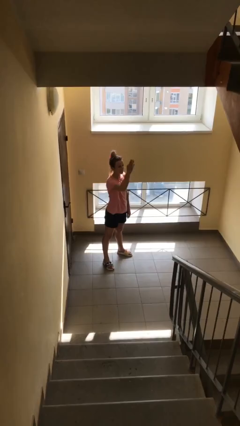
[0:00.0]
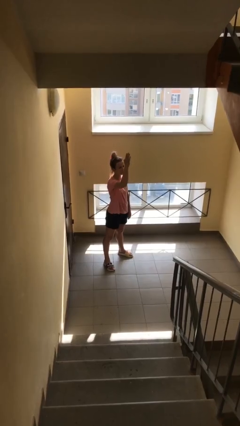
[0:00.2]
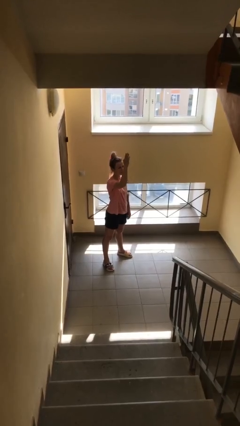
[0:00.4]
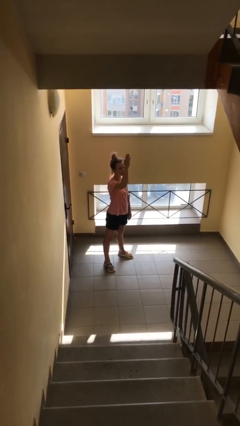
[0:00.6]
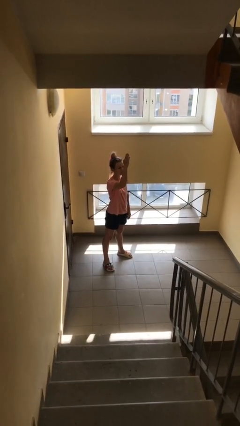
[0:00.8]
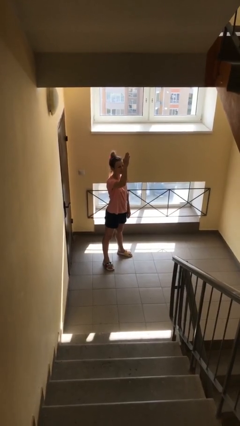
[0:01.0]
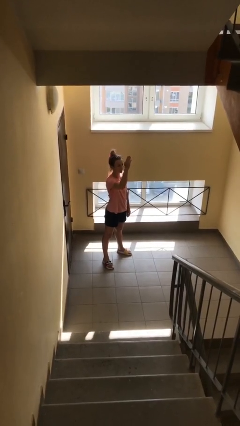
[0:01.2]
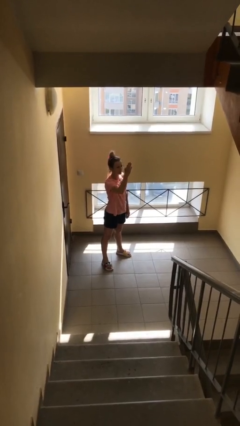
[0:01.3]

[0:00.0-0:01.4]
person gestures raise hand

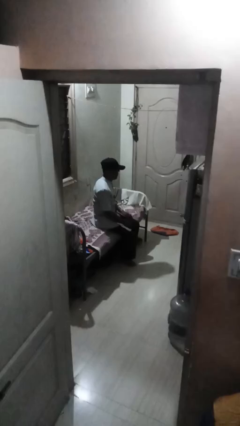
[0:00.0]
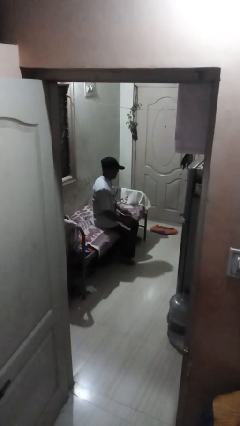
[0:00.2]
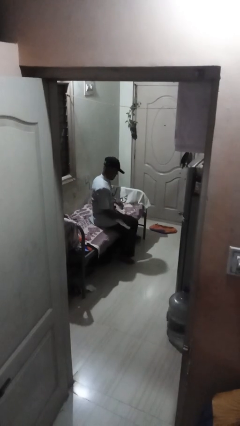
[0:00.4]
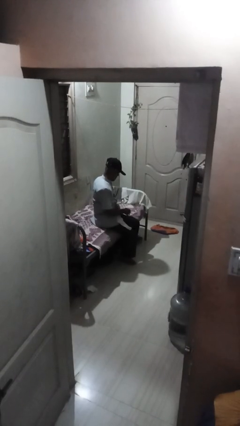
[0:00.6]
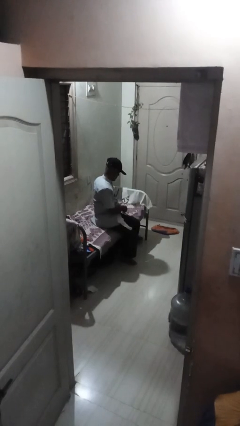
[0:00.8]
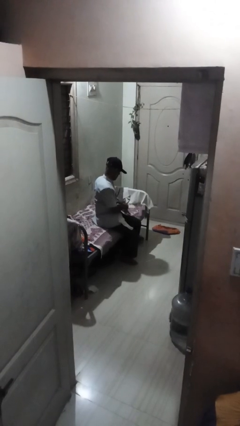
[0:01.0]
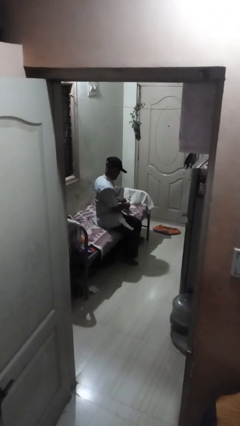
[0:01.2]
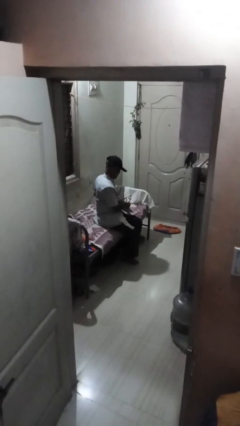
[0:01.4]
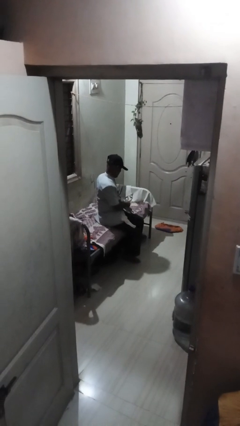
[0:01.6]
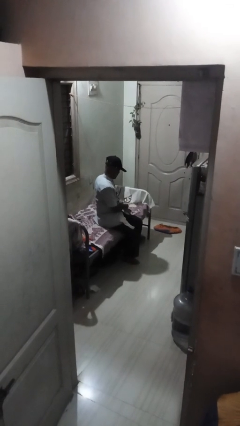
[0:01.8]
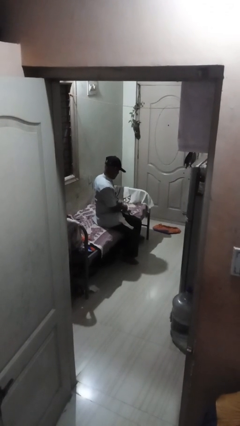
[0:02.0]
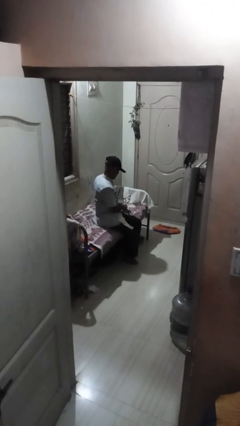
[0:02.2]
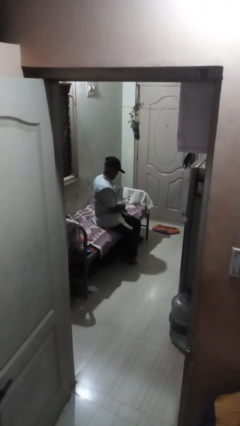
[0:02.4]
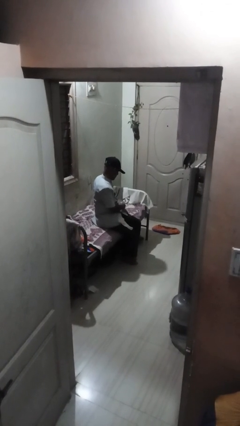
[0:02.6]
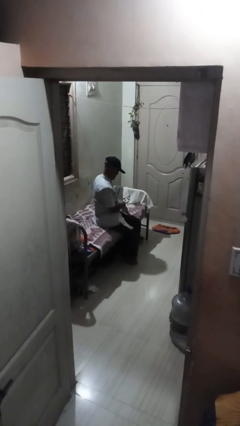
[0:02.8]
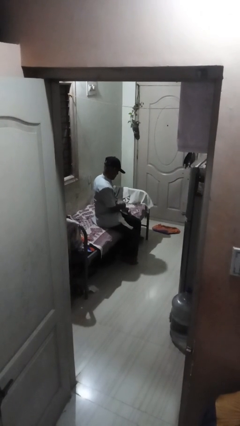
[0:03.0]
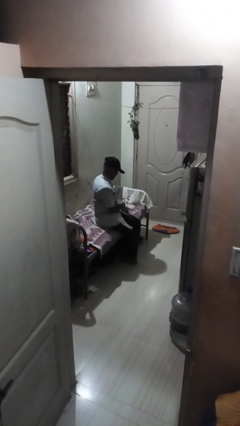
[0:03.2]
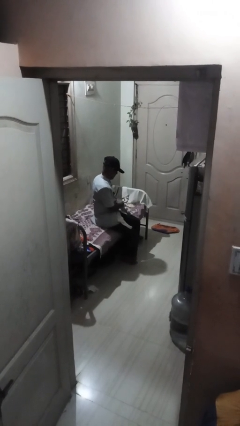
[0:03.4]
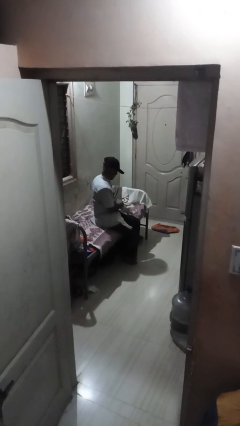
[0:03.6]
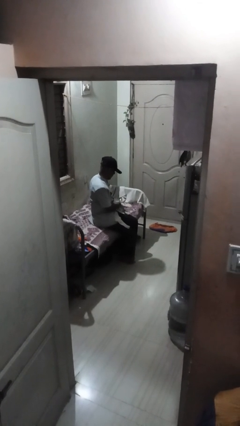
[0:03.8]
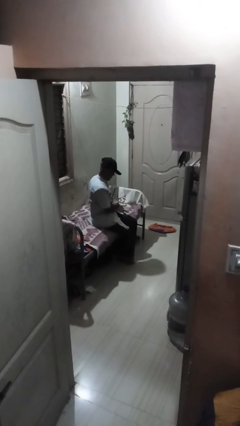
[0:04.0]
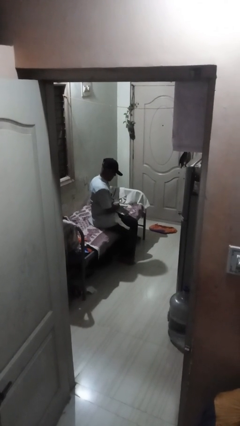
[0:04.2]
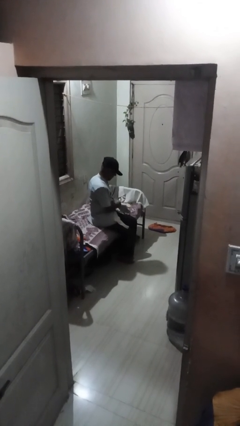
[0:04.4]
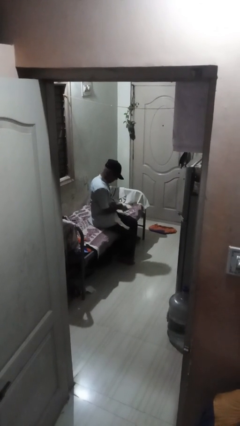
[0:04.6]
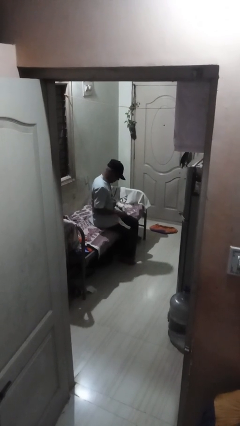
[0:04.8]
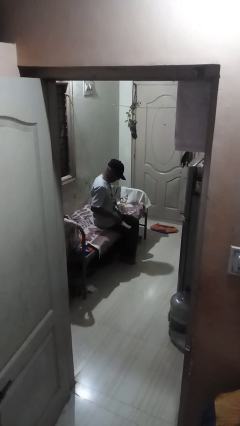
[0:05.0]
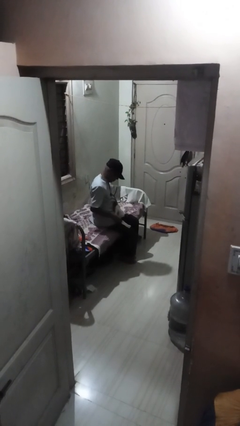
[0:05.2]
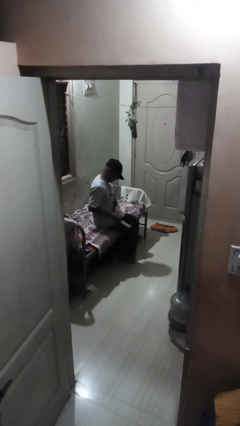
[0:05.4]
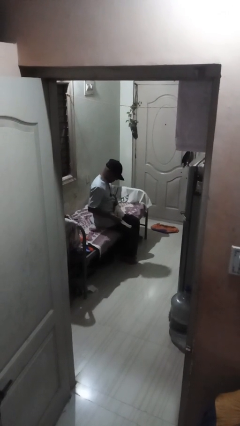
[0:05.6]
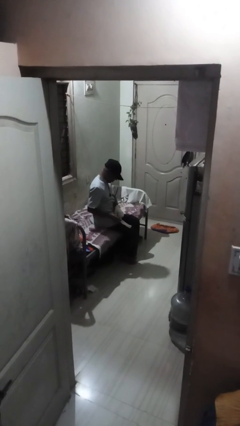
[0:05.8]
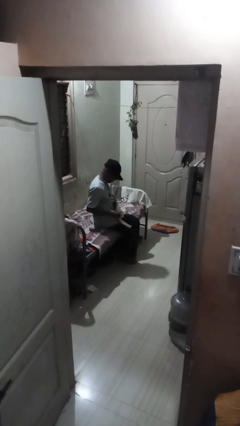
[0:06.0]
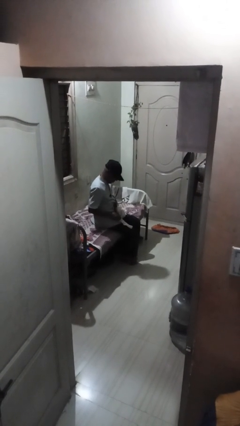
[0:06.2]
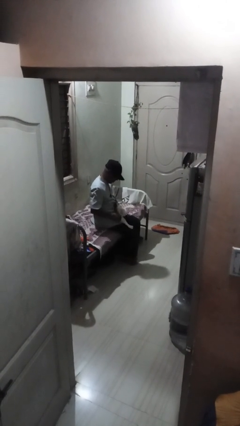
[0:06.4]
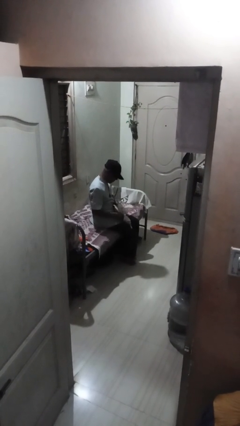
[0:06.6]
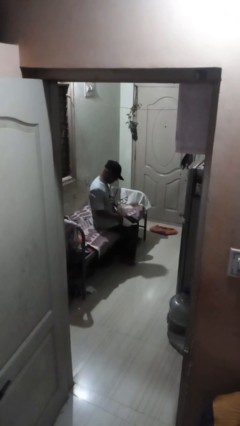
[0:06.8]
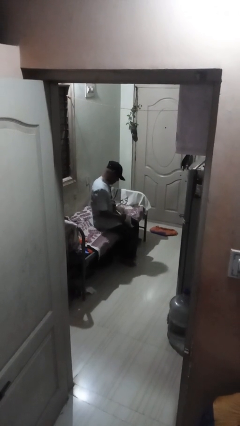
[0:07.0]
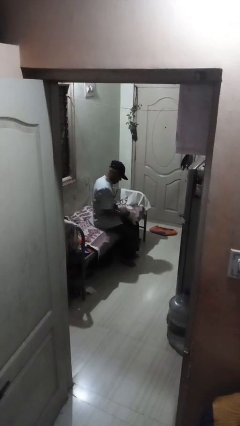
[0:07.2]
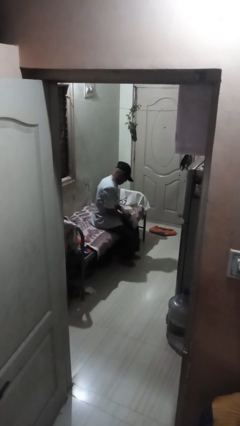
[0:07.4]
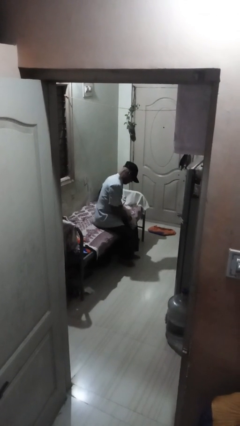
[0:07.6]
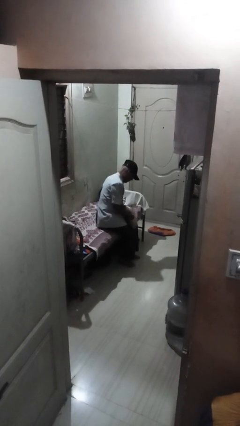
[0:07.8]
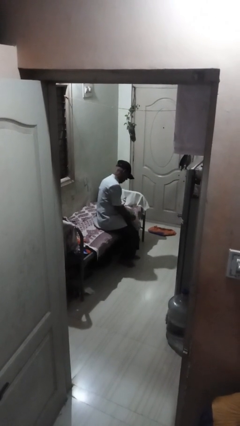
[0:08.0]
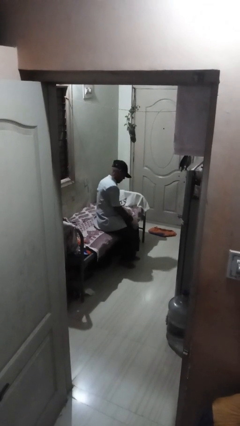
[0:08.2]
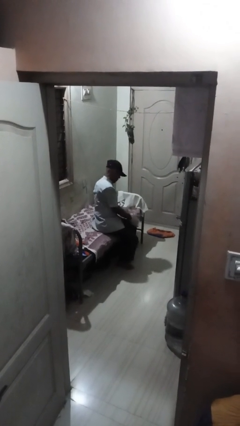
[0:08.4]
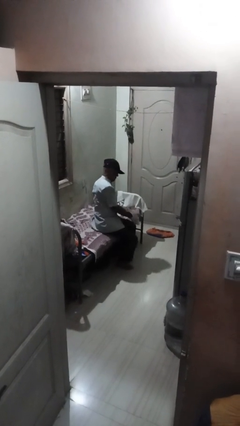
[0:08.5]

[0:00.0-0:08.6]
person puts on gloves

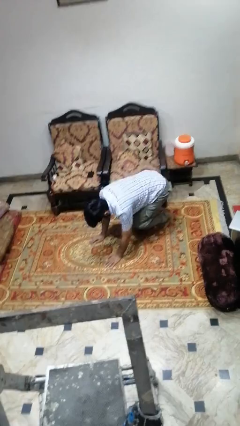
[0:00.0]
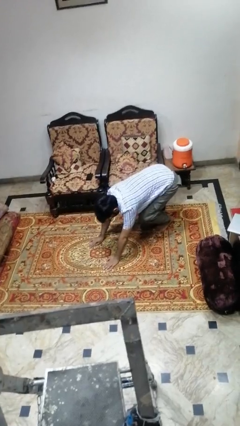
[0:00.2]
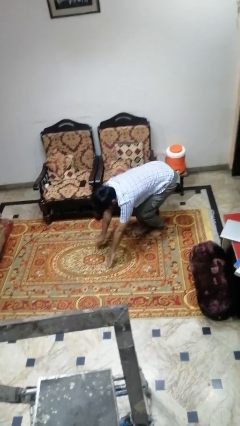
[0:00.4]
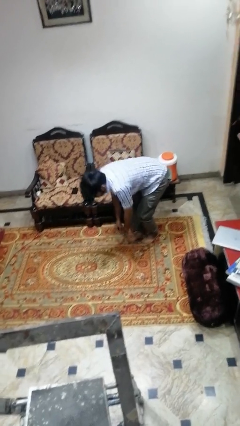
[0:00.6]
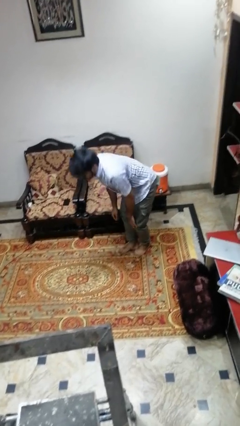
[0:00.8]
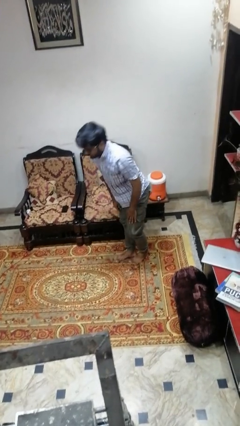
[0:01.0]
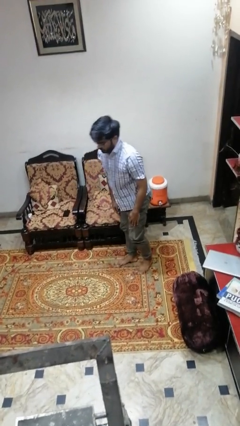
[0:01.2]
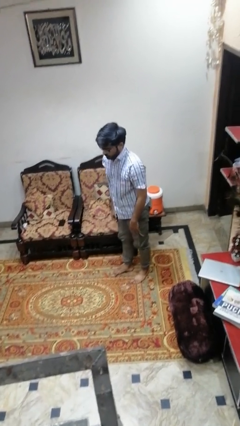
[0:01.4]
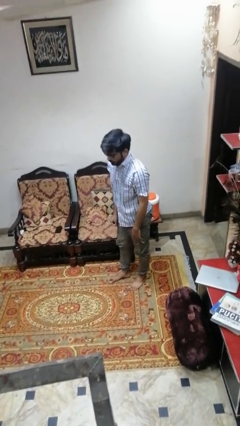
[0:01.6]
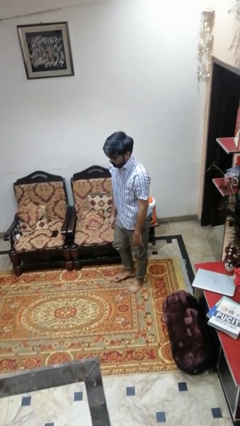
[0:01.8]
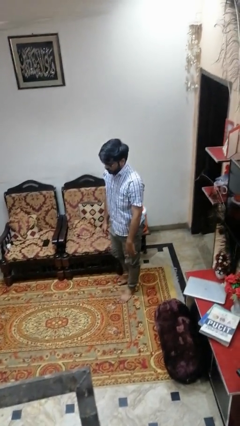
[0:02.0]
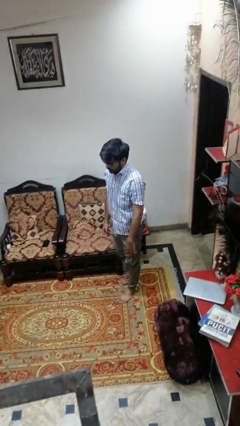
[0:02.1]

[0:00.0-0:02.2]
person stands up from floor

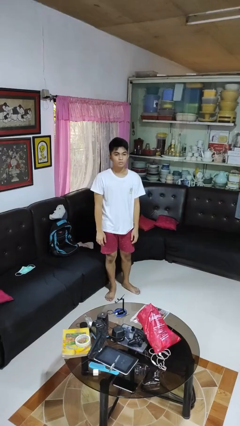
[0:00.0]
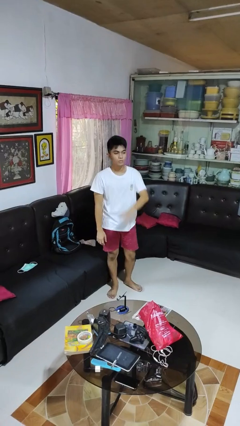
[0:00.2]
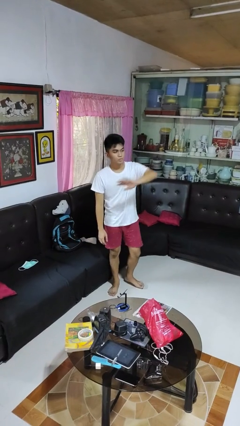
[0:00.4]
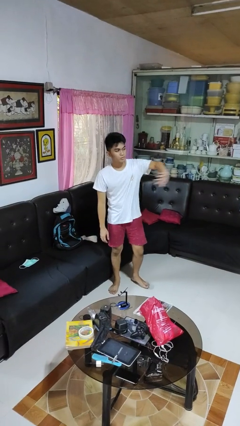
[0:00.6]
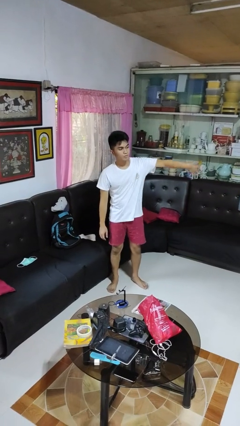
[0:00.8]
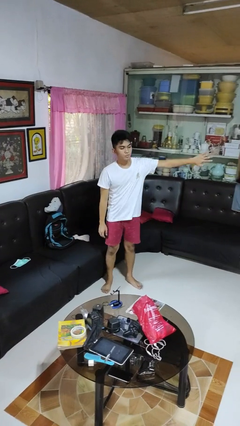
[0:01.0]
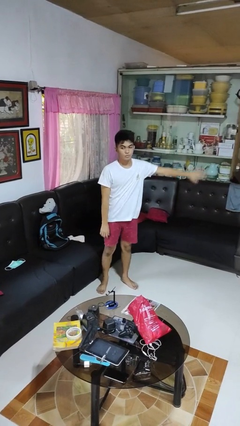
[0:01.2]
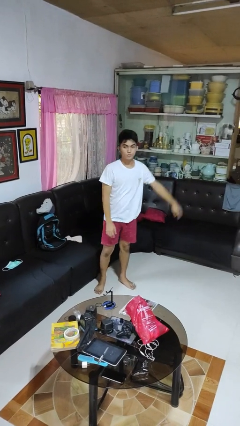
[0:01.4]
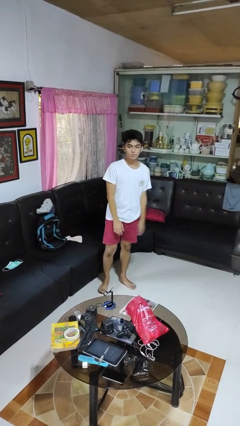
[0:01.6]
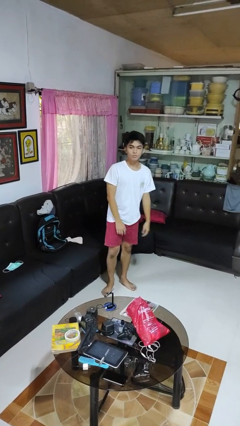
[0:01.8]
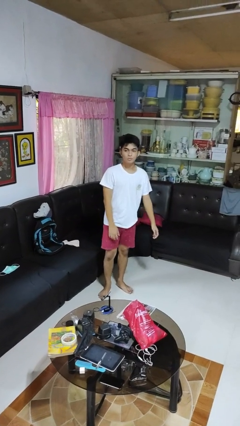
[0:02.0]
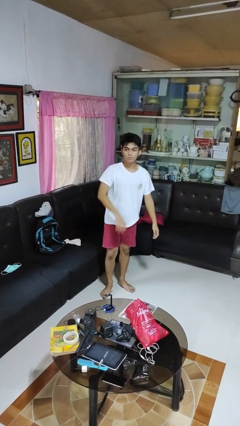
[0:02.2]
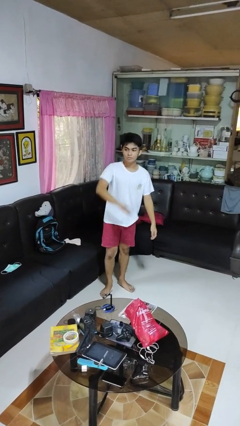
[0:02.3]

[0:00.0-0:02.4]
person gestures swipe left

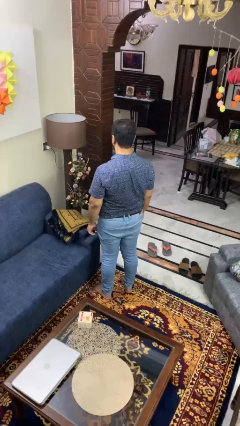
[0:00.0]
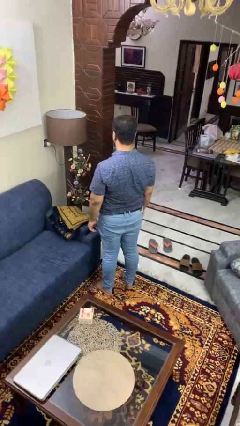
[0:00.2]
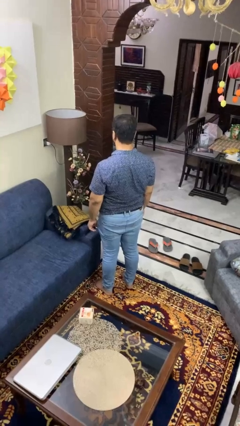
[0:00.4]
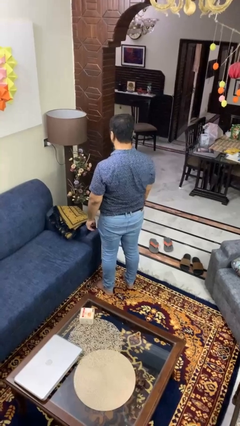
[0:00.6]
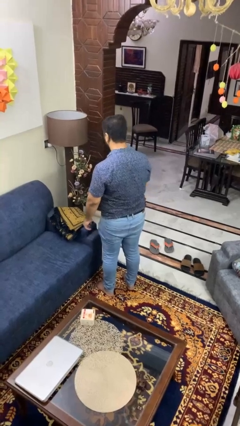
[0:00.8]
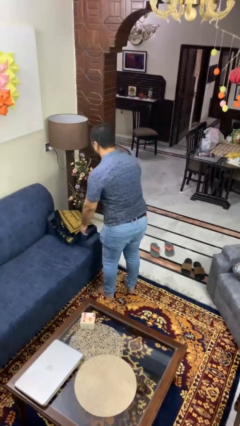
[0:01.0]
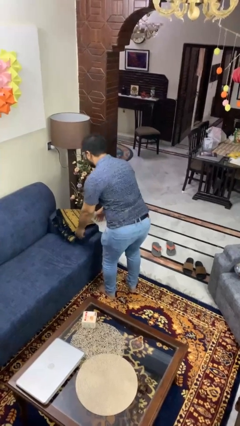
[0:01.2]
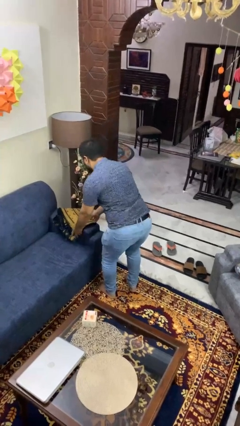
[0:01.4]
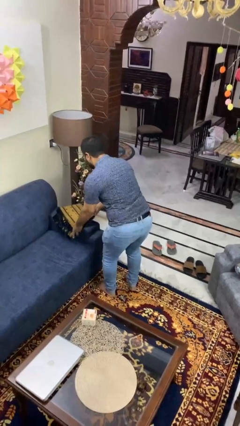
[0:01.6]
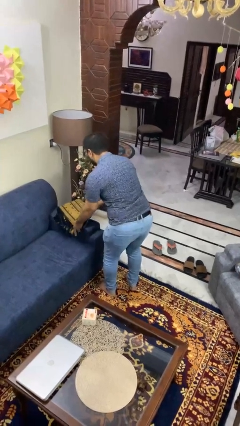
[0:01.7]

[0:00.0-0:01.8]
person picks up object from couch

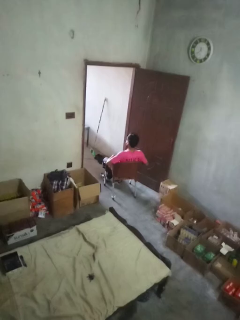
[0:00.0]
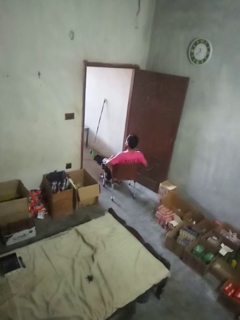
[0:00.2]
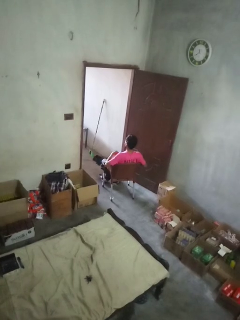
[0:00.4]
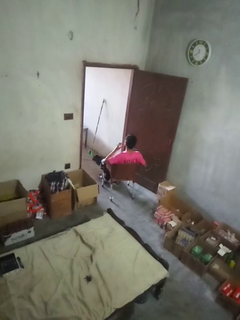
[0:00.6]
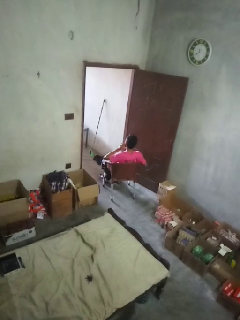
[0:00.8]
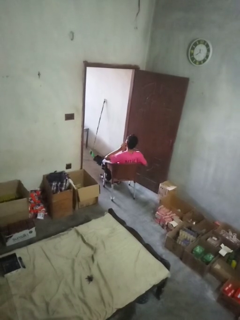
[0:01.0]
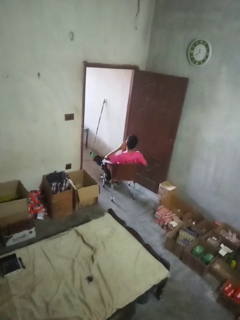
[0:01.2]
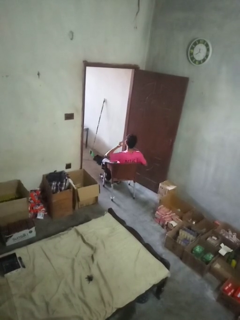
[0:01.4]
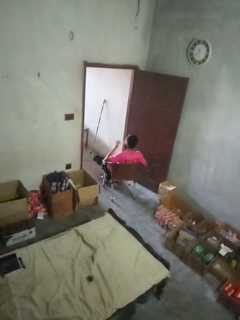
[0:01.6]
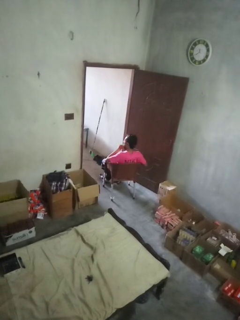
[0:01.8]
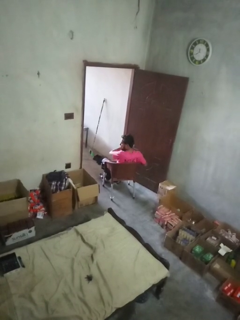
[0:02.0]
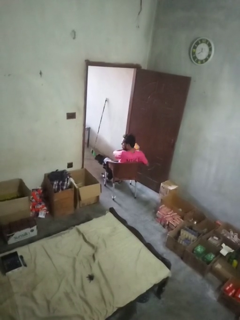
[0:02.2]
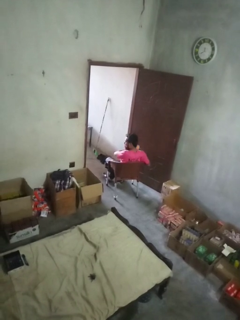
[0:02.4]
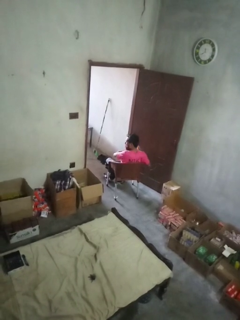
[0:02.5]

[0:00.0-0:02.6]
person takes off facemask
